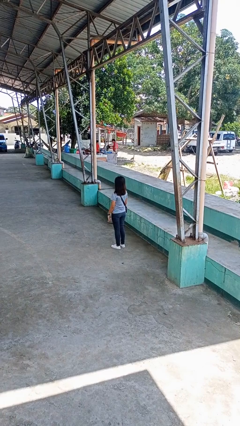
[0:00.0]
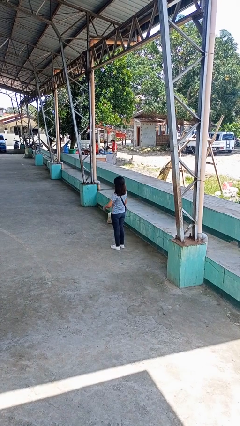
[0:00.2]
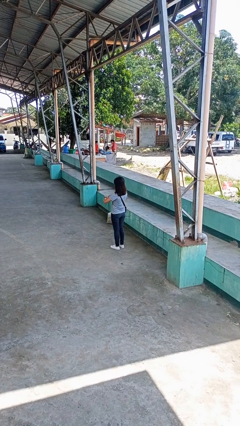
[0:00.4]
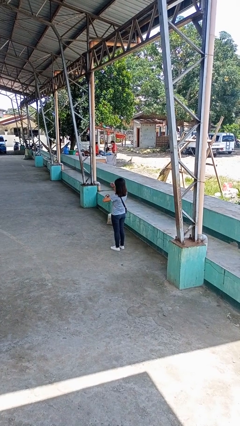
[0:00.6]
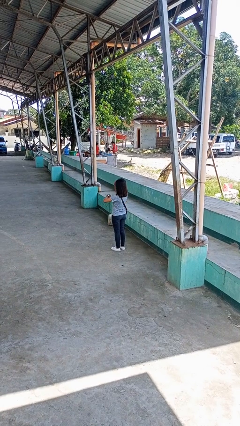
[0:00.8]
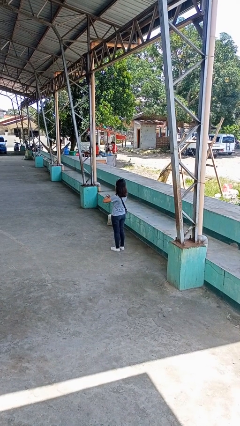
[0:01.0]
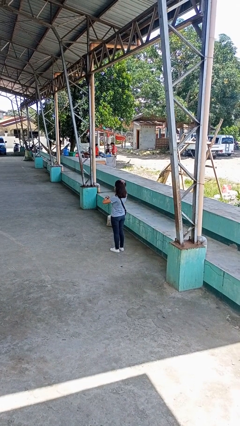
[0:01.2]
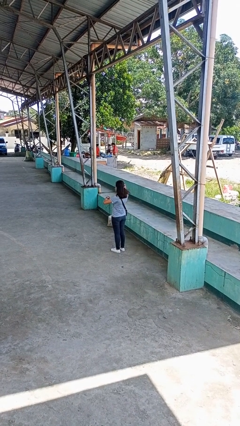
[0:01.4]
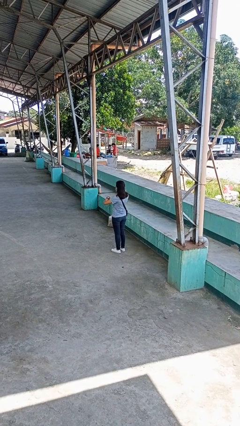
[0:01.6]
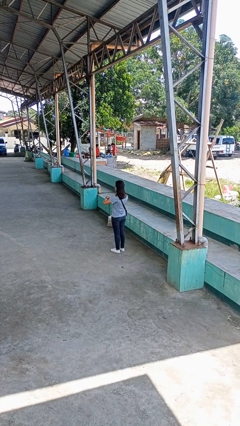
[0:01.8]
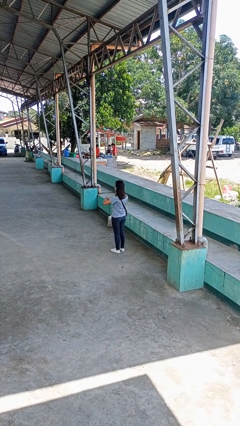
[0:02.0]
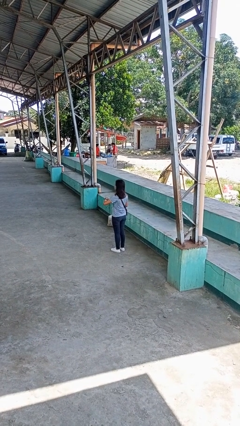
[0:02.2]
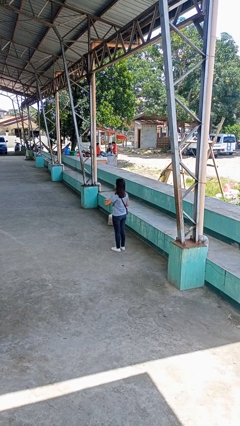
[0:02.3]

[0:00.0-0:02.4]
person looks at wristwatch

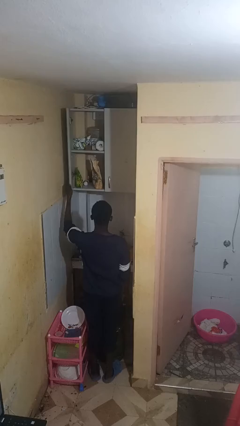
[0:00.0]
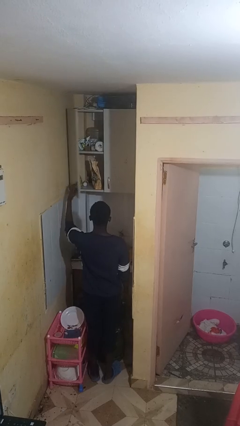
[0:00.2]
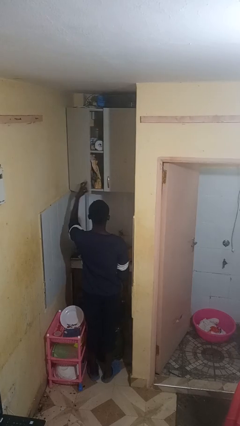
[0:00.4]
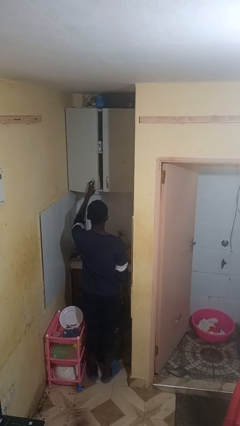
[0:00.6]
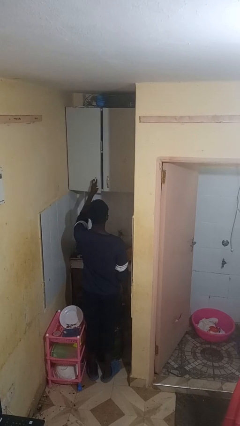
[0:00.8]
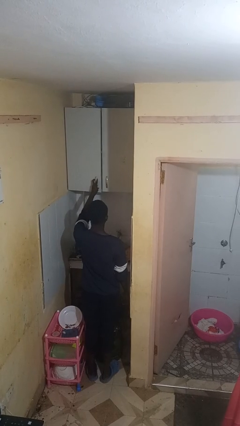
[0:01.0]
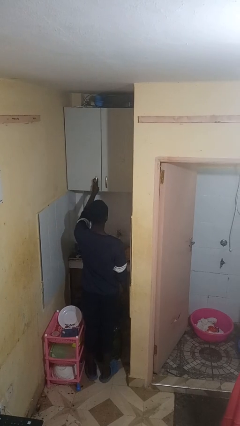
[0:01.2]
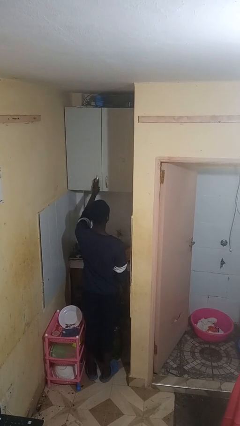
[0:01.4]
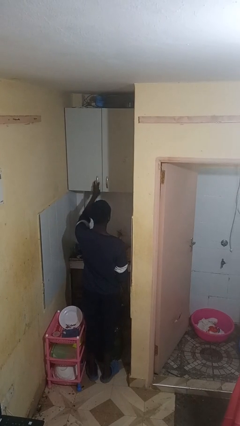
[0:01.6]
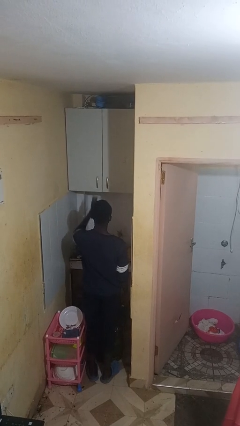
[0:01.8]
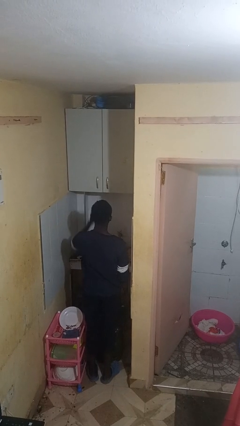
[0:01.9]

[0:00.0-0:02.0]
person closes cabinet

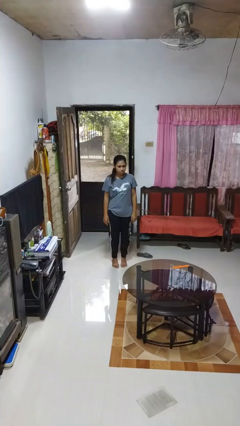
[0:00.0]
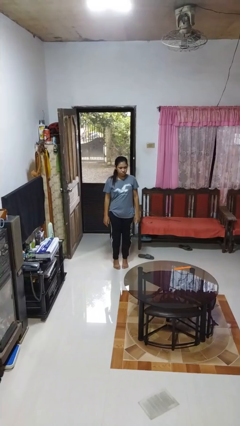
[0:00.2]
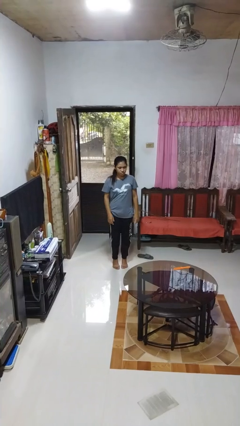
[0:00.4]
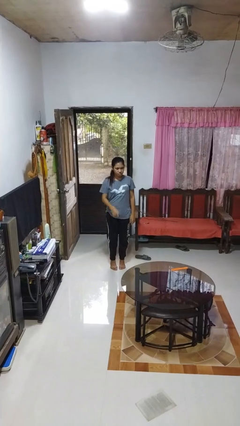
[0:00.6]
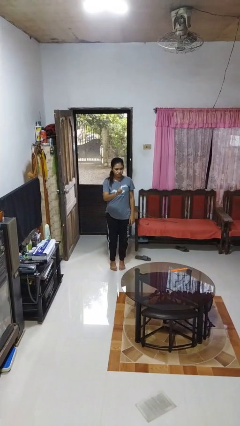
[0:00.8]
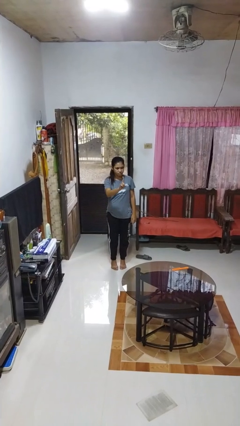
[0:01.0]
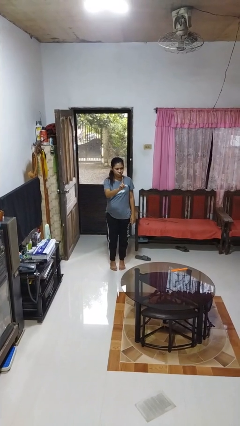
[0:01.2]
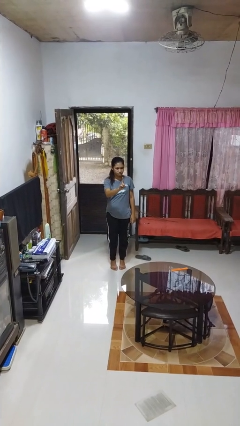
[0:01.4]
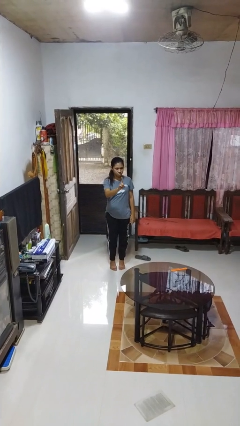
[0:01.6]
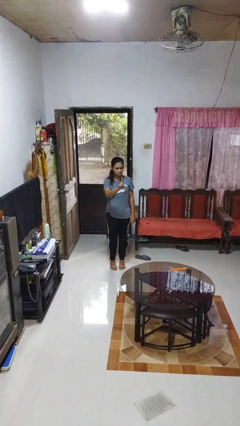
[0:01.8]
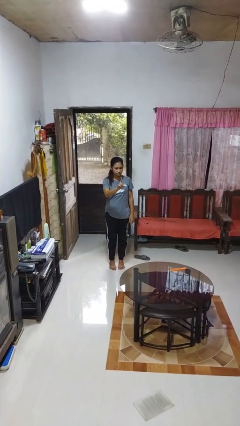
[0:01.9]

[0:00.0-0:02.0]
person gestures number one

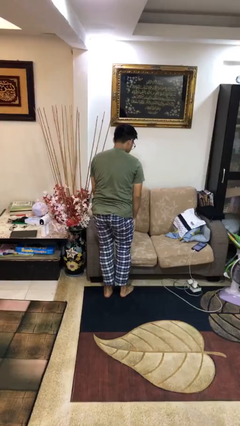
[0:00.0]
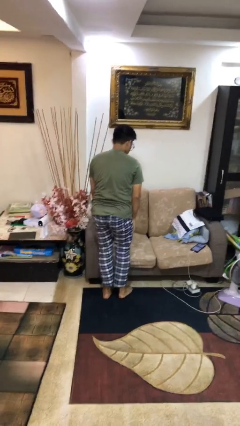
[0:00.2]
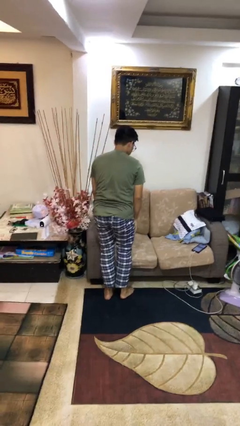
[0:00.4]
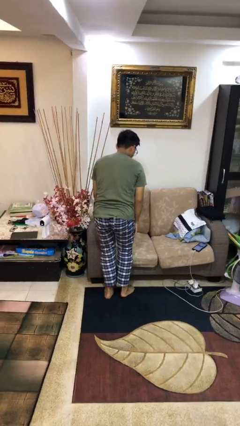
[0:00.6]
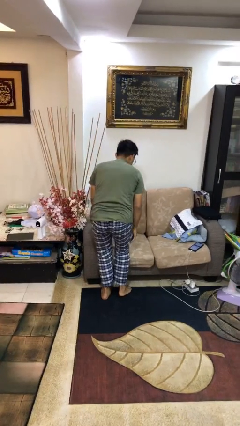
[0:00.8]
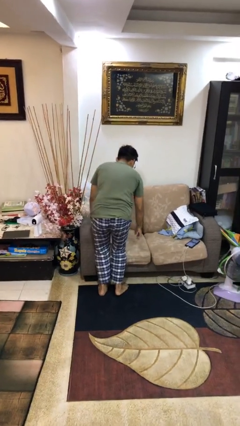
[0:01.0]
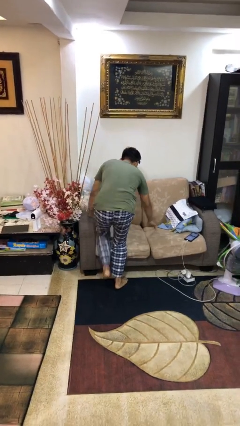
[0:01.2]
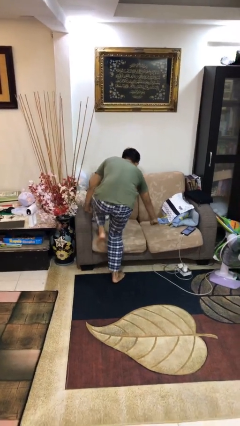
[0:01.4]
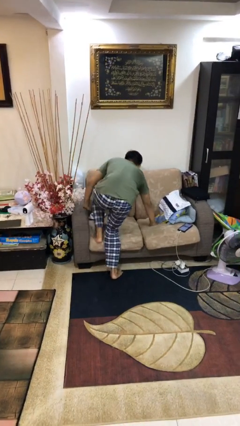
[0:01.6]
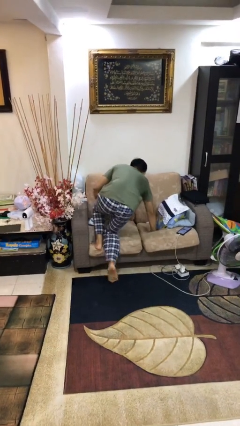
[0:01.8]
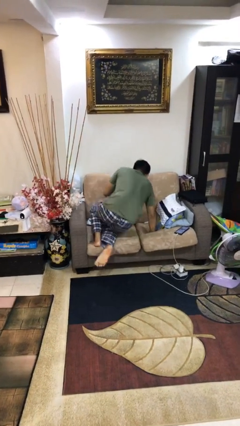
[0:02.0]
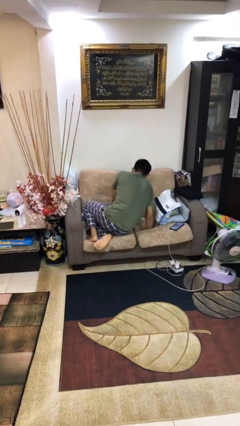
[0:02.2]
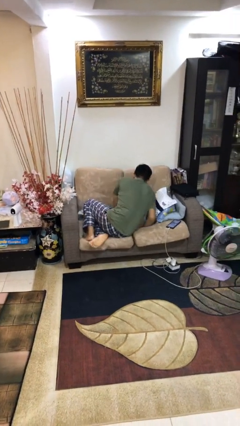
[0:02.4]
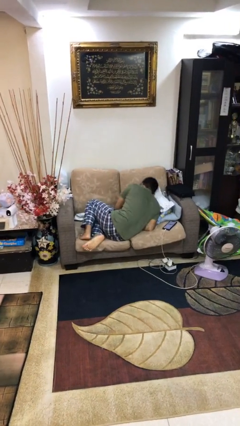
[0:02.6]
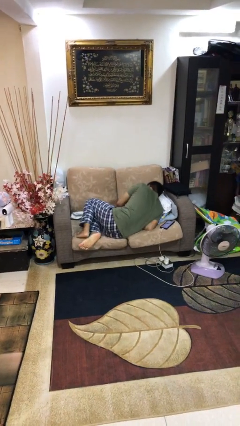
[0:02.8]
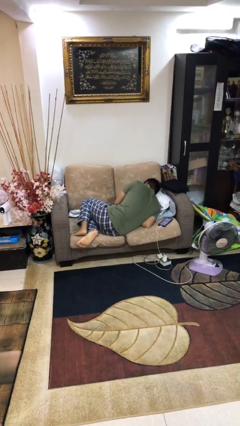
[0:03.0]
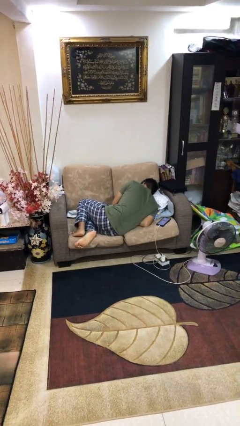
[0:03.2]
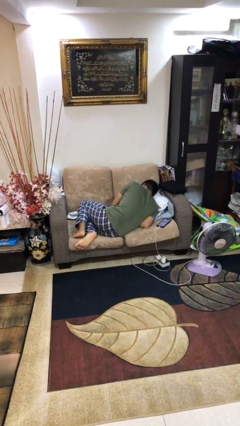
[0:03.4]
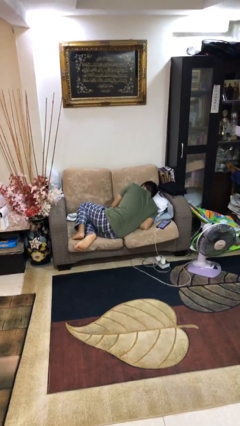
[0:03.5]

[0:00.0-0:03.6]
person lies down on couch

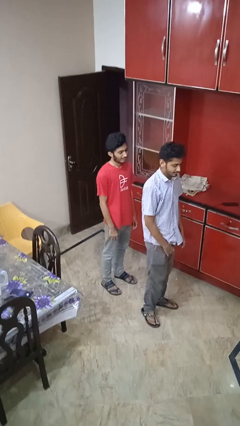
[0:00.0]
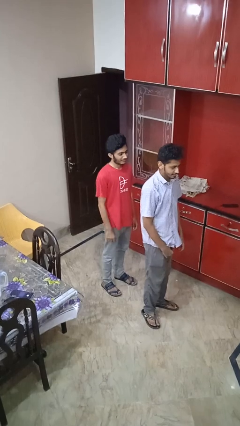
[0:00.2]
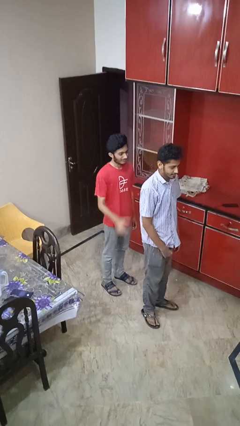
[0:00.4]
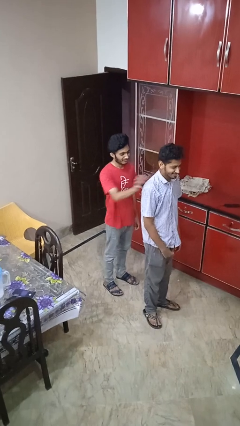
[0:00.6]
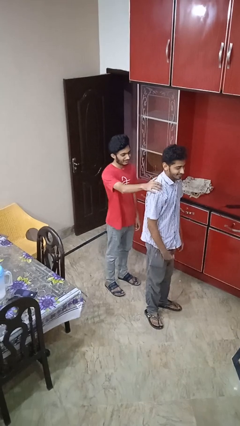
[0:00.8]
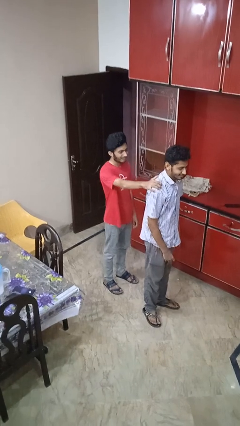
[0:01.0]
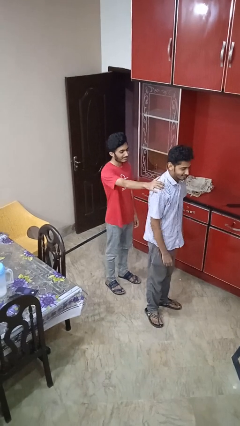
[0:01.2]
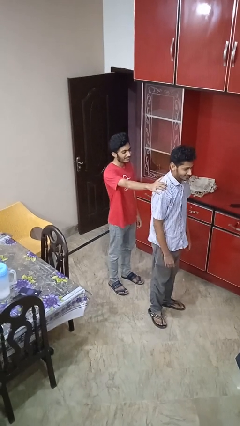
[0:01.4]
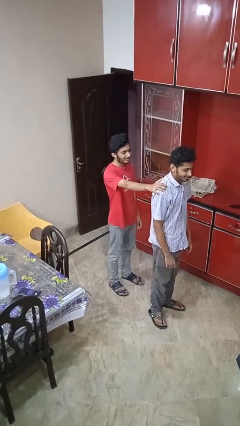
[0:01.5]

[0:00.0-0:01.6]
person grabs person by shoulder

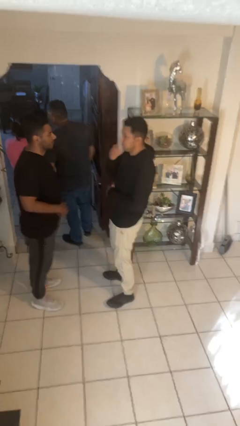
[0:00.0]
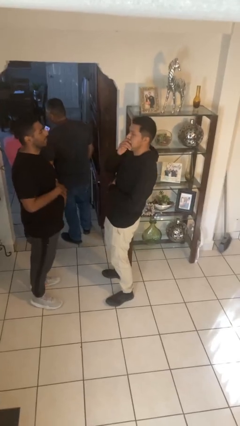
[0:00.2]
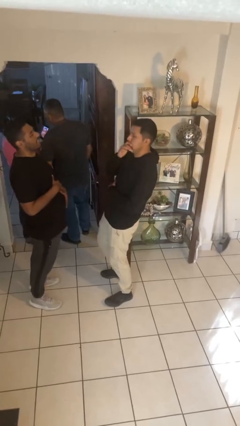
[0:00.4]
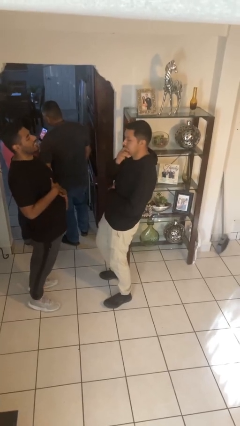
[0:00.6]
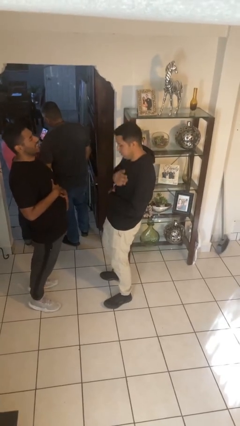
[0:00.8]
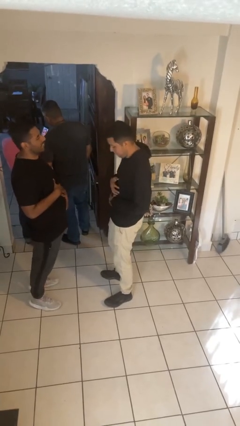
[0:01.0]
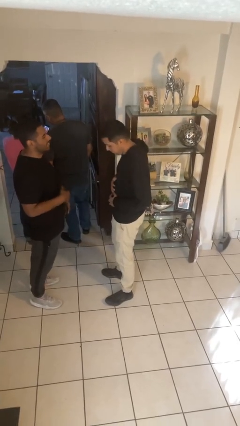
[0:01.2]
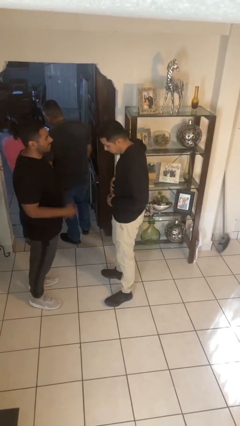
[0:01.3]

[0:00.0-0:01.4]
person laughs with person

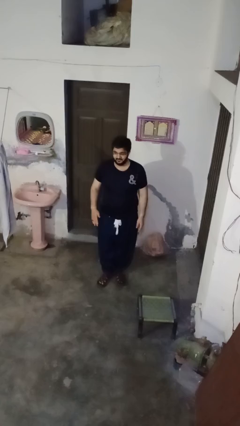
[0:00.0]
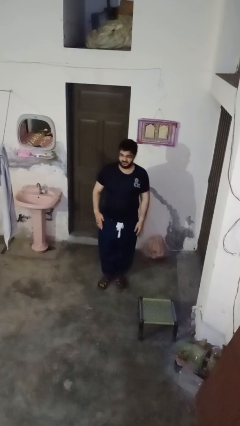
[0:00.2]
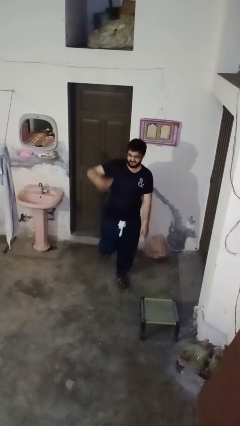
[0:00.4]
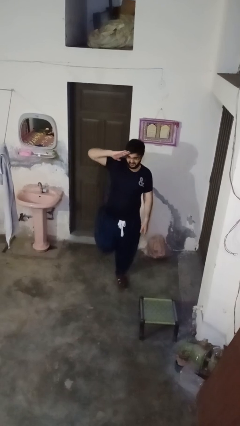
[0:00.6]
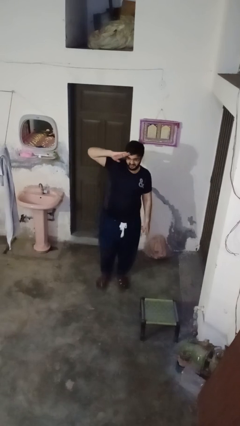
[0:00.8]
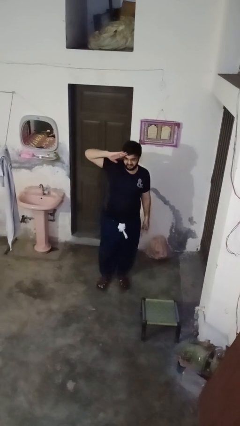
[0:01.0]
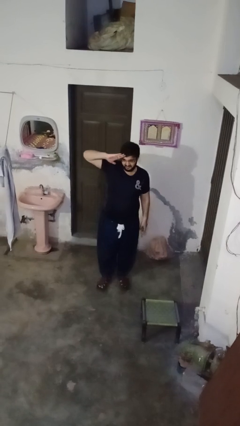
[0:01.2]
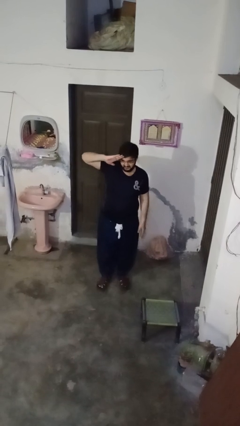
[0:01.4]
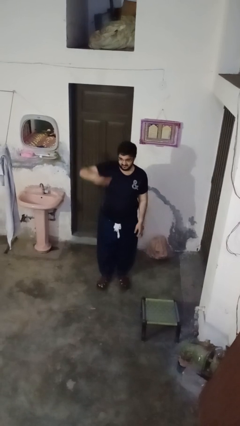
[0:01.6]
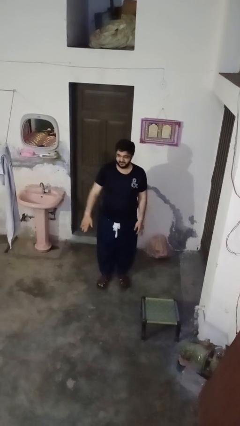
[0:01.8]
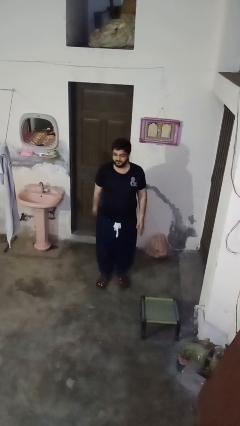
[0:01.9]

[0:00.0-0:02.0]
person salutes

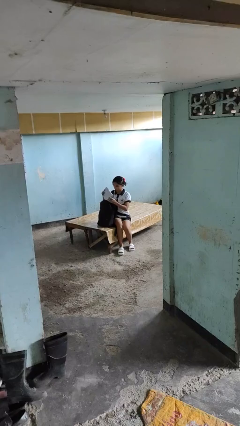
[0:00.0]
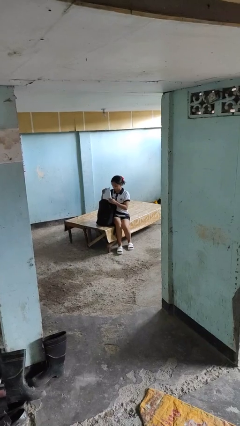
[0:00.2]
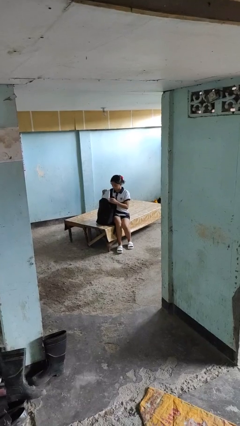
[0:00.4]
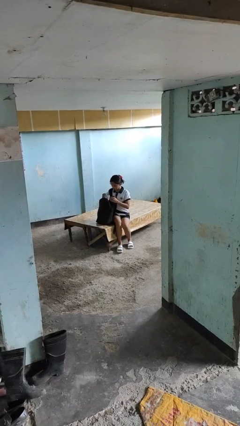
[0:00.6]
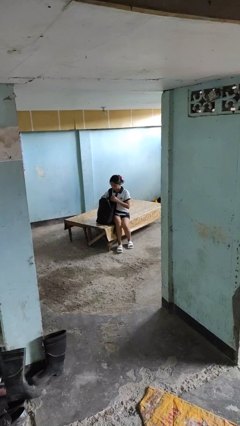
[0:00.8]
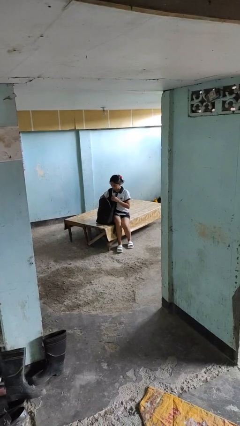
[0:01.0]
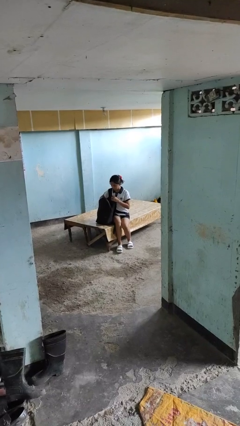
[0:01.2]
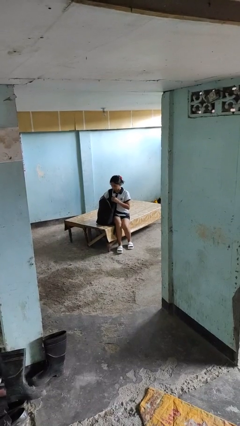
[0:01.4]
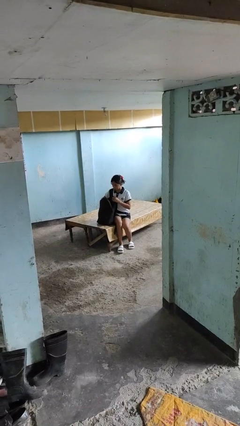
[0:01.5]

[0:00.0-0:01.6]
person puts object into backpack

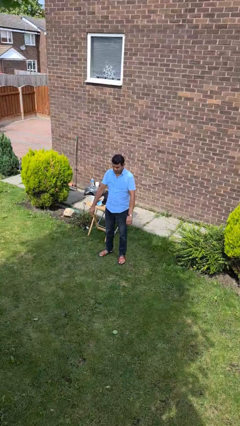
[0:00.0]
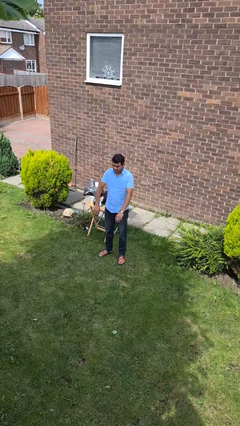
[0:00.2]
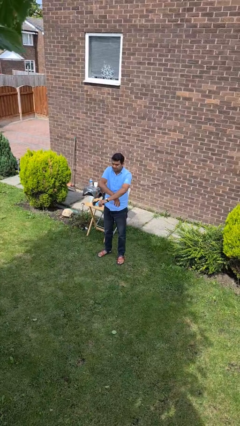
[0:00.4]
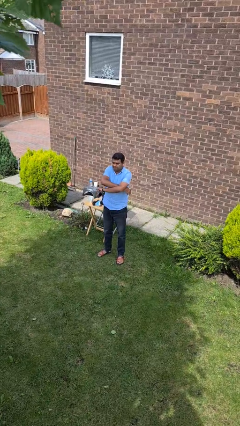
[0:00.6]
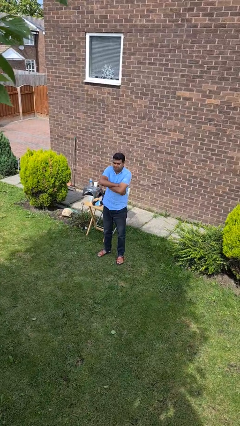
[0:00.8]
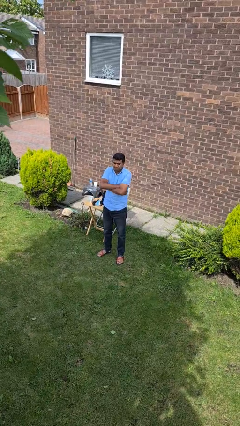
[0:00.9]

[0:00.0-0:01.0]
person crosses arms
